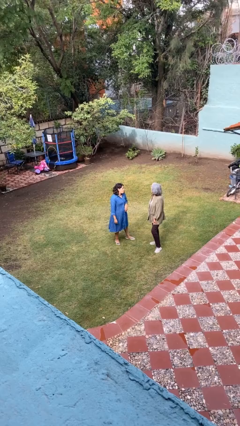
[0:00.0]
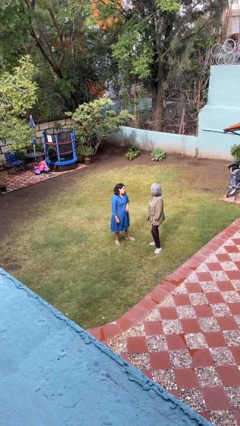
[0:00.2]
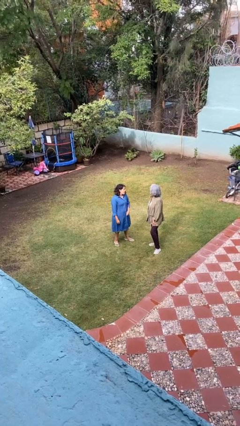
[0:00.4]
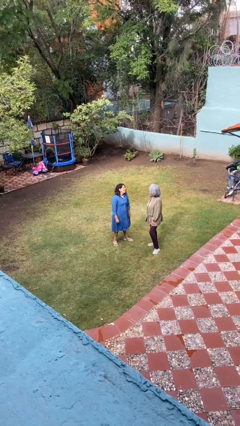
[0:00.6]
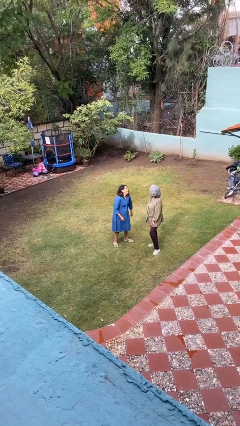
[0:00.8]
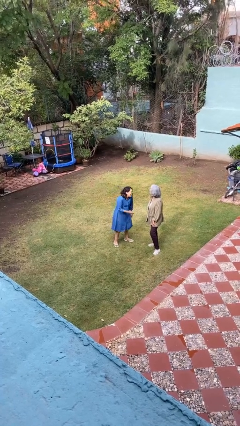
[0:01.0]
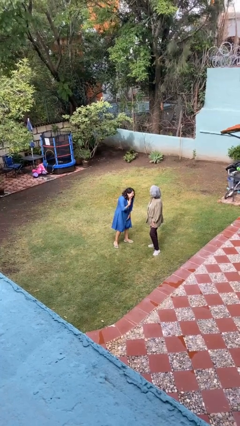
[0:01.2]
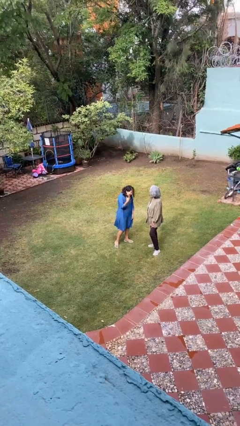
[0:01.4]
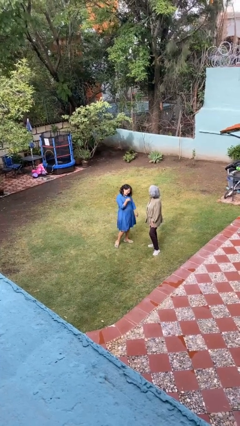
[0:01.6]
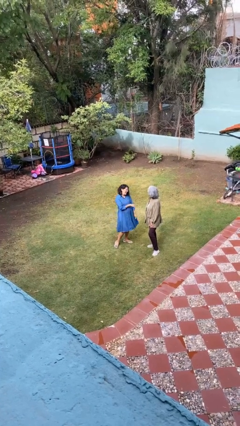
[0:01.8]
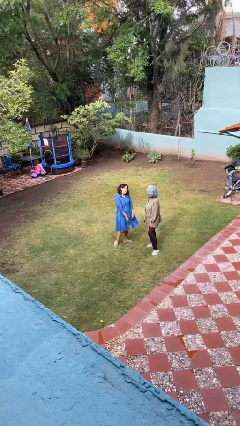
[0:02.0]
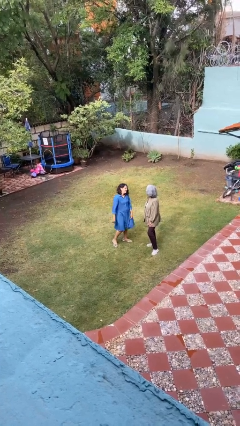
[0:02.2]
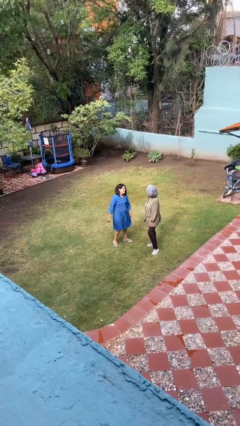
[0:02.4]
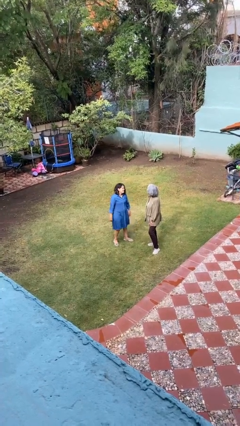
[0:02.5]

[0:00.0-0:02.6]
person laughs with person

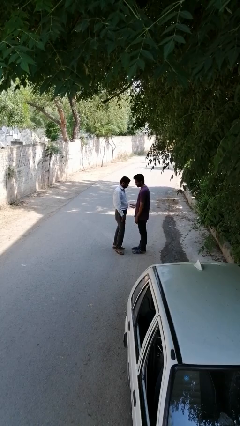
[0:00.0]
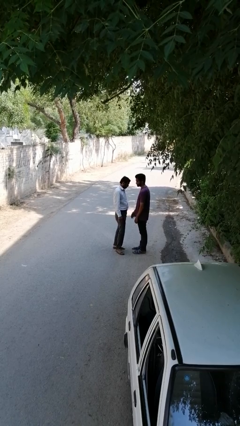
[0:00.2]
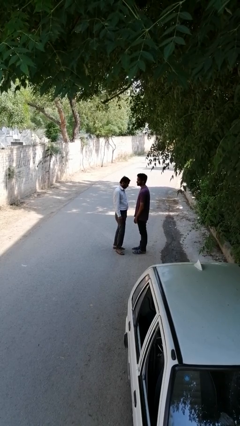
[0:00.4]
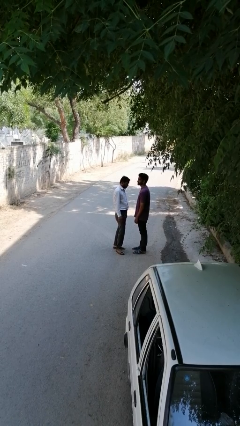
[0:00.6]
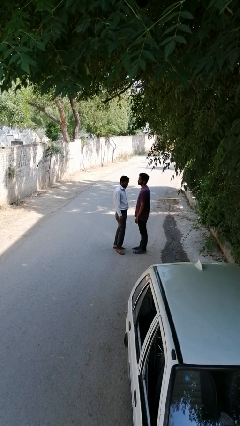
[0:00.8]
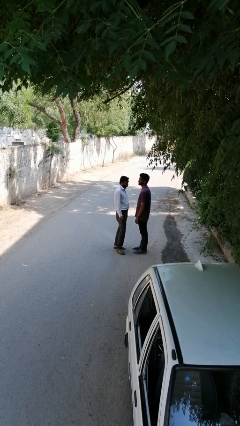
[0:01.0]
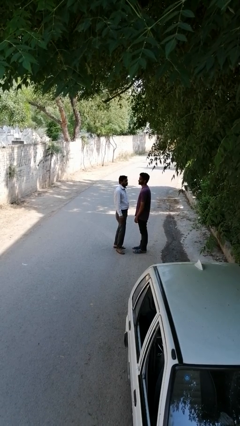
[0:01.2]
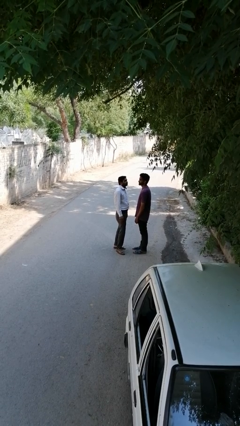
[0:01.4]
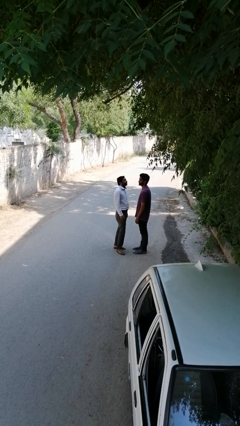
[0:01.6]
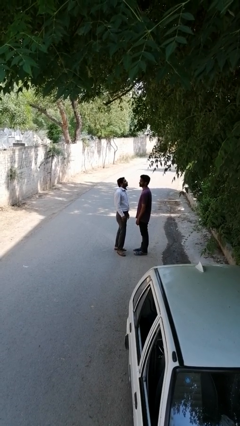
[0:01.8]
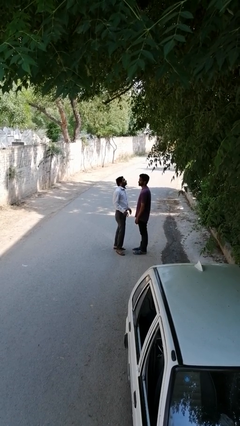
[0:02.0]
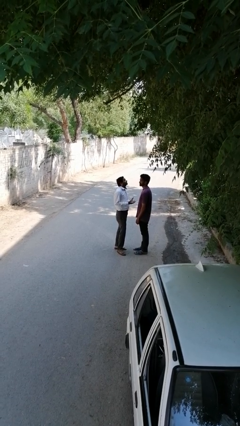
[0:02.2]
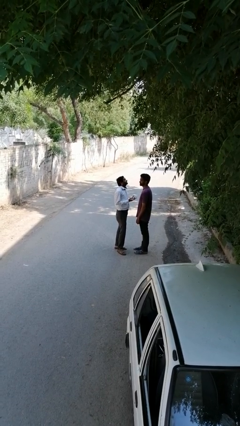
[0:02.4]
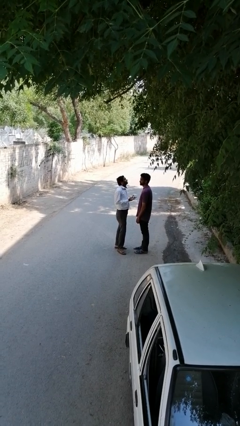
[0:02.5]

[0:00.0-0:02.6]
person highfives hand

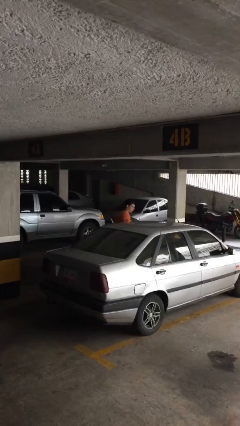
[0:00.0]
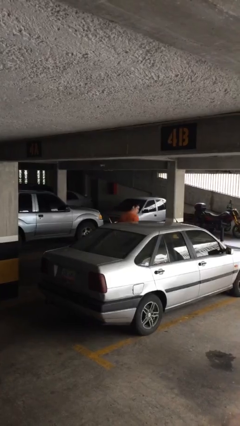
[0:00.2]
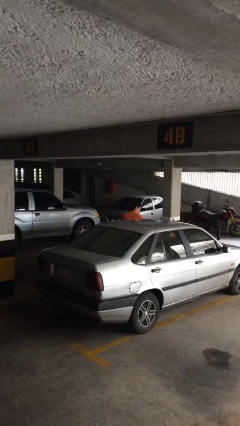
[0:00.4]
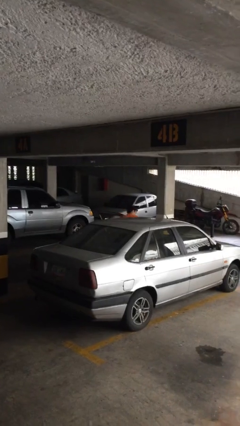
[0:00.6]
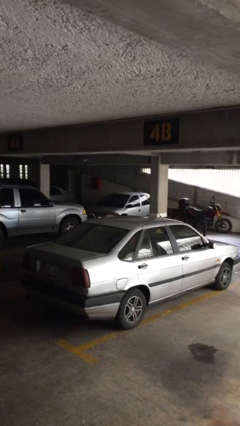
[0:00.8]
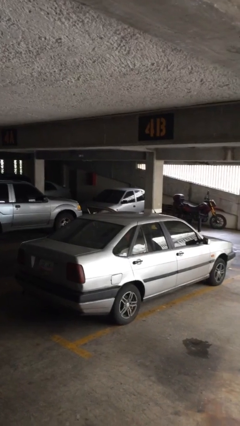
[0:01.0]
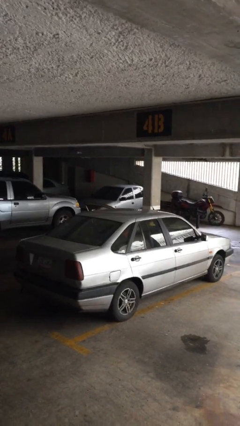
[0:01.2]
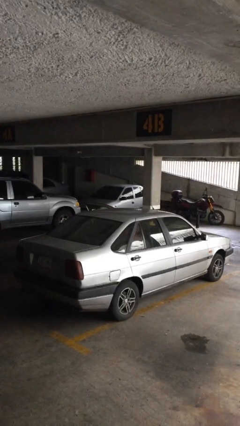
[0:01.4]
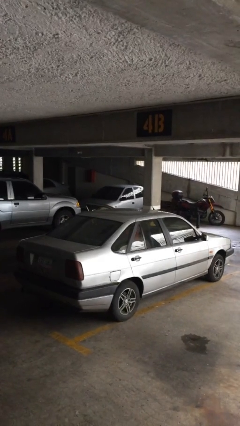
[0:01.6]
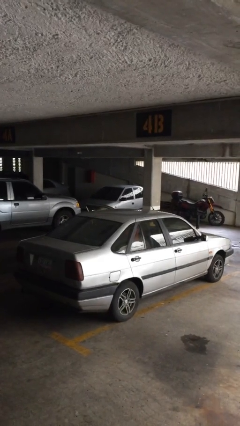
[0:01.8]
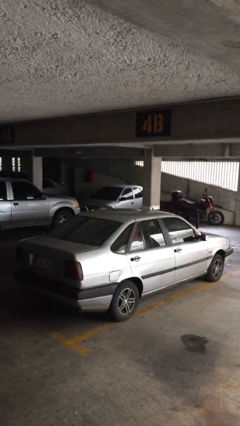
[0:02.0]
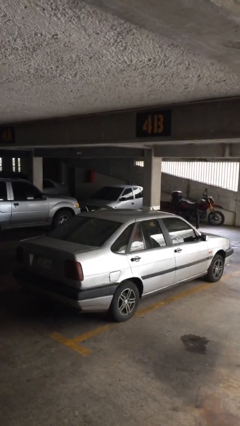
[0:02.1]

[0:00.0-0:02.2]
person enters car

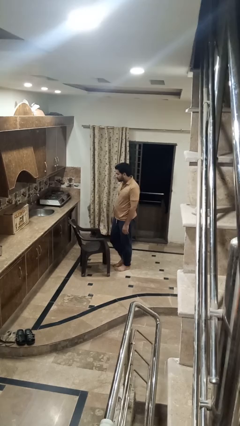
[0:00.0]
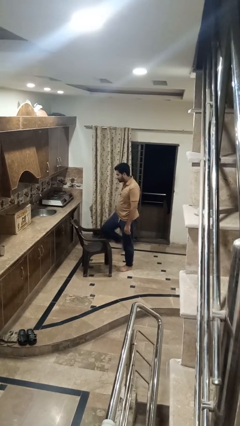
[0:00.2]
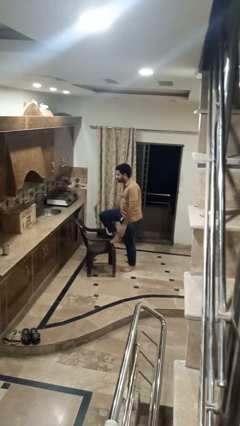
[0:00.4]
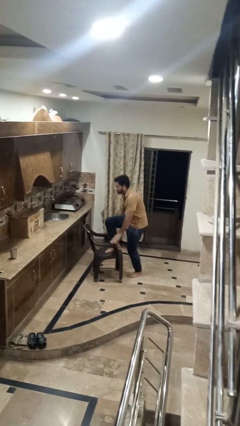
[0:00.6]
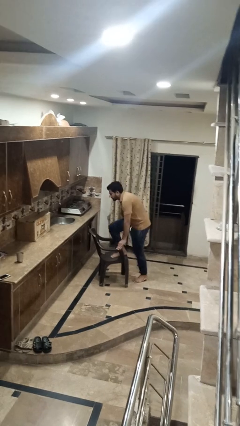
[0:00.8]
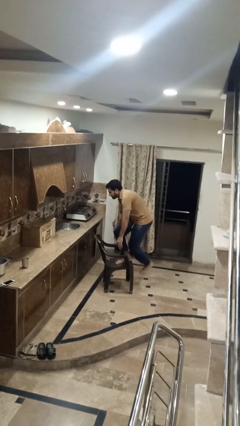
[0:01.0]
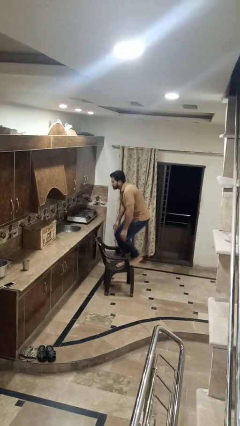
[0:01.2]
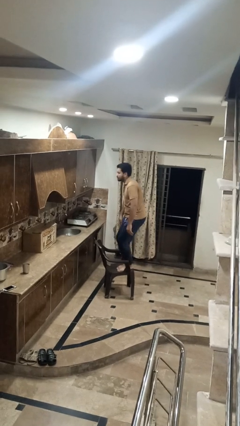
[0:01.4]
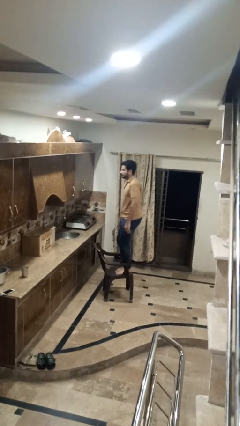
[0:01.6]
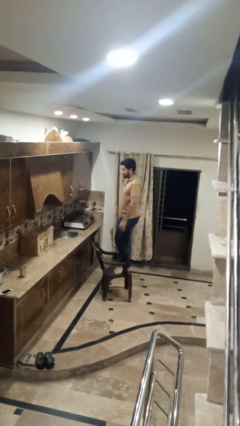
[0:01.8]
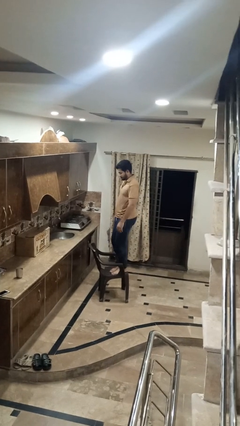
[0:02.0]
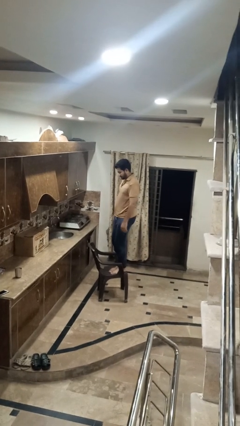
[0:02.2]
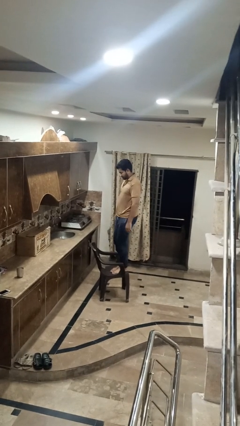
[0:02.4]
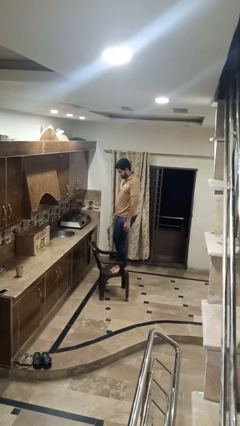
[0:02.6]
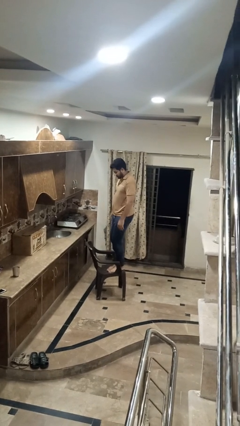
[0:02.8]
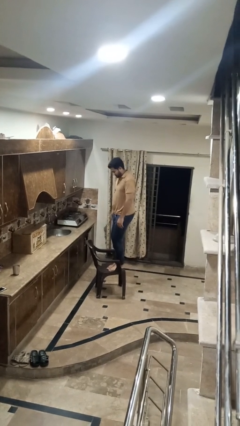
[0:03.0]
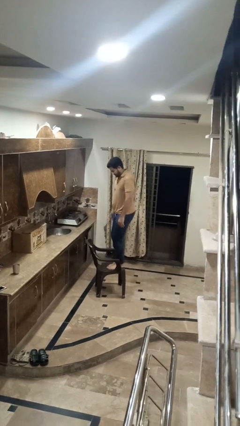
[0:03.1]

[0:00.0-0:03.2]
person climbs on chair

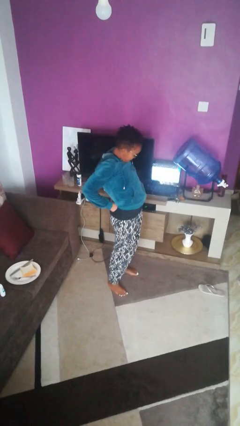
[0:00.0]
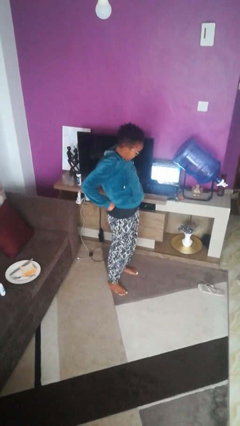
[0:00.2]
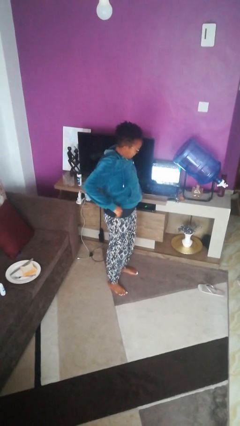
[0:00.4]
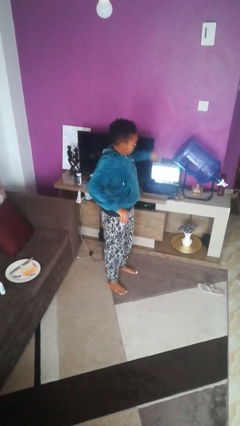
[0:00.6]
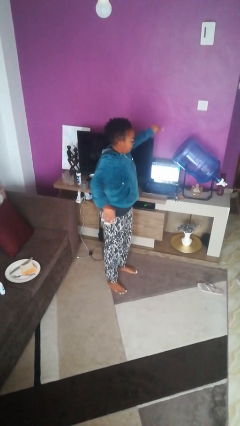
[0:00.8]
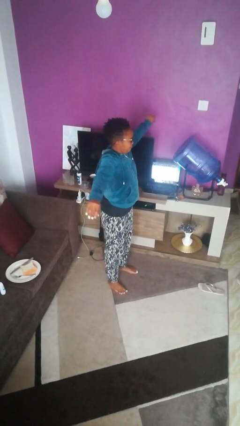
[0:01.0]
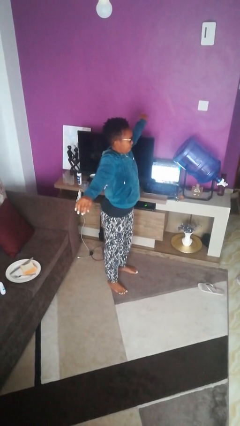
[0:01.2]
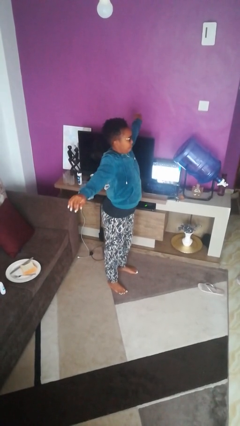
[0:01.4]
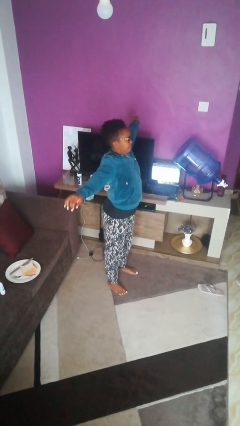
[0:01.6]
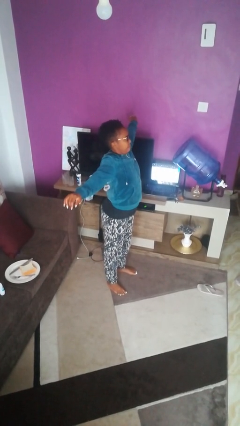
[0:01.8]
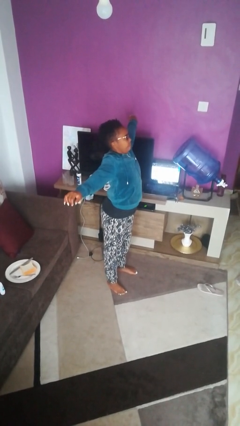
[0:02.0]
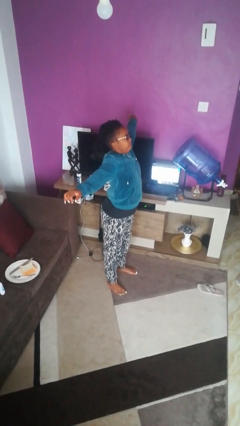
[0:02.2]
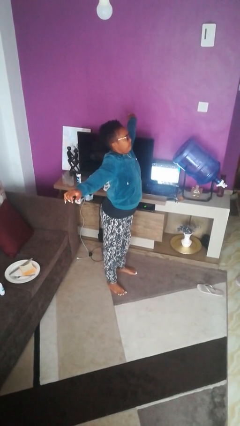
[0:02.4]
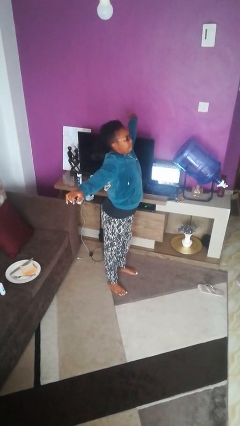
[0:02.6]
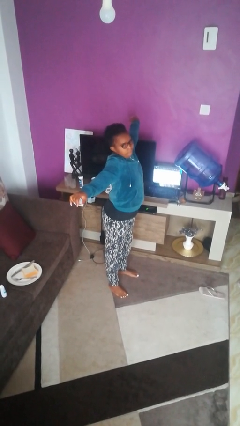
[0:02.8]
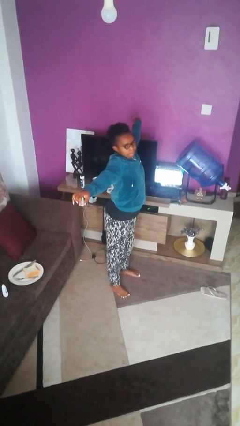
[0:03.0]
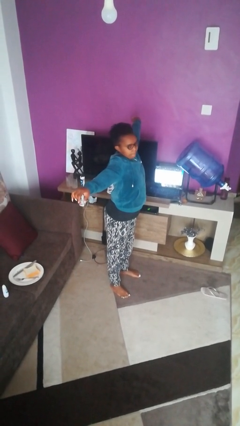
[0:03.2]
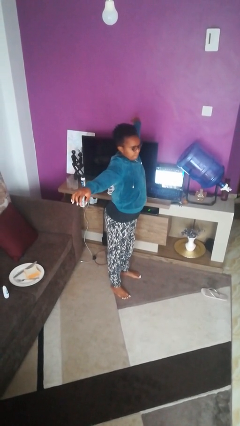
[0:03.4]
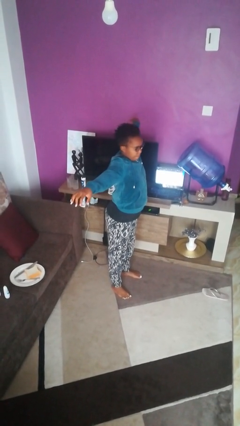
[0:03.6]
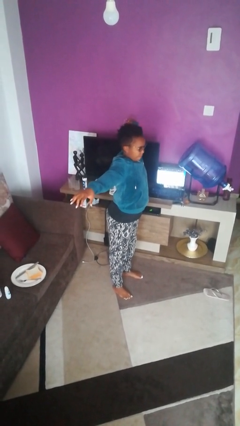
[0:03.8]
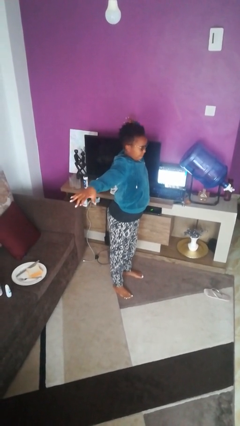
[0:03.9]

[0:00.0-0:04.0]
person stretches arms to side

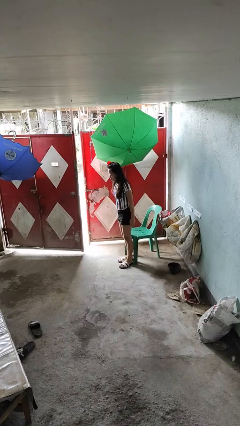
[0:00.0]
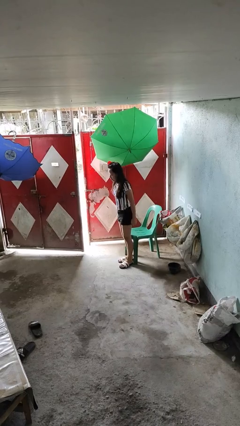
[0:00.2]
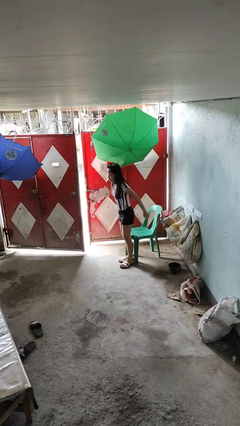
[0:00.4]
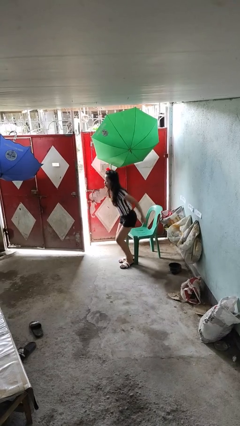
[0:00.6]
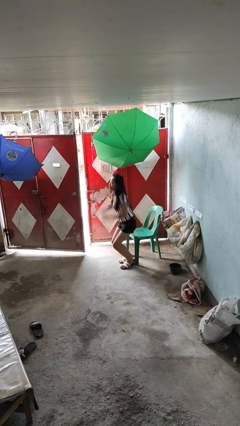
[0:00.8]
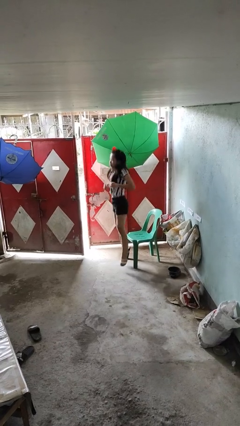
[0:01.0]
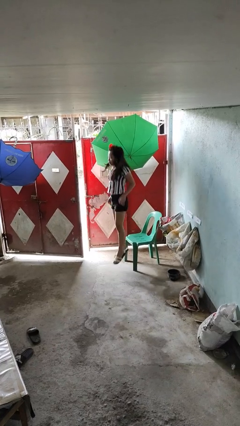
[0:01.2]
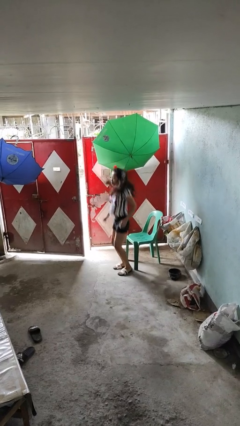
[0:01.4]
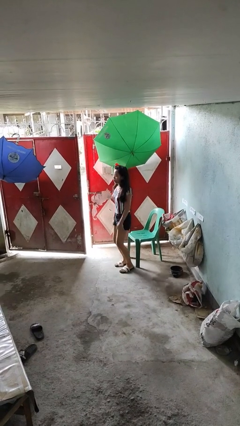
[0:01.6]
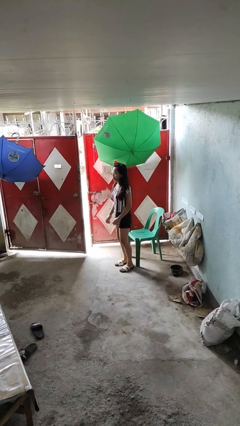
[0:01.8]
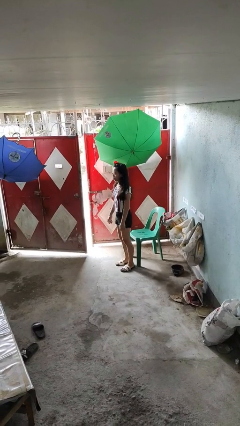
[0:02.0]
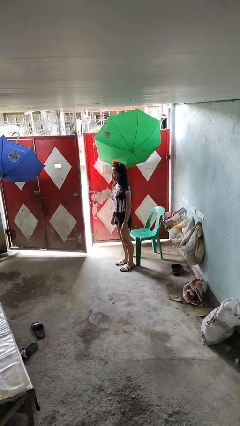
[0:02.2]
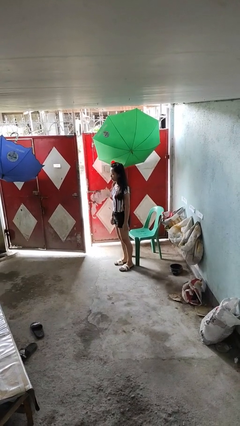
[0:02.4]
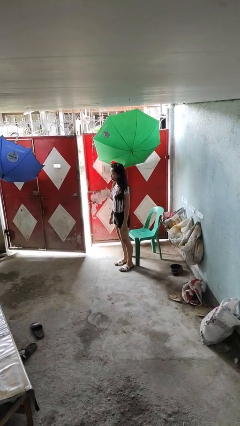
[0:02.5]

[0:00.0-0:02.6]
person jumps
